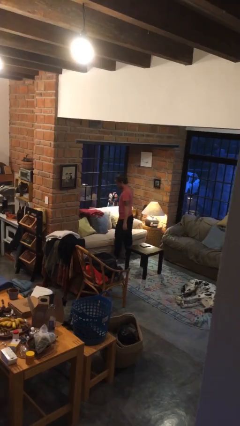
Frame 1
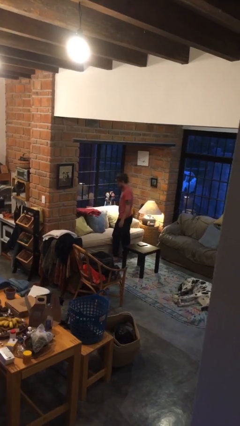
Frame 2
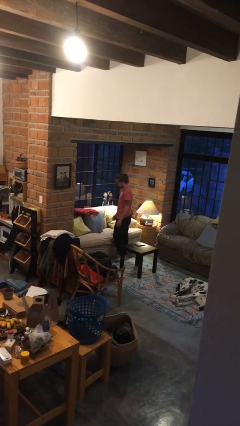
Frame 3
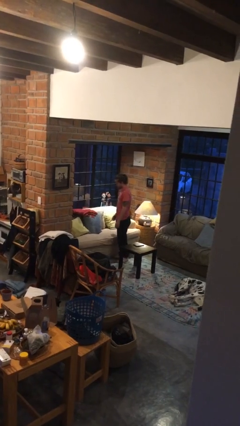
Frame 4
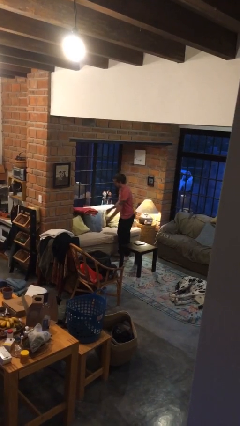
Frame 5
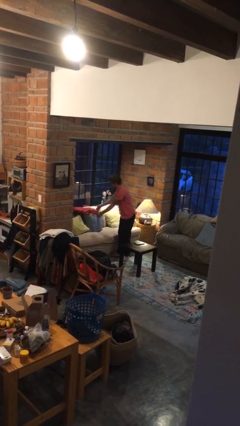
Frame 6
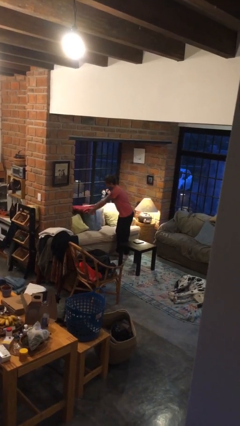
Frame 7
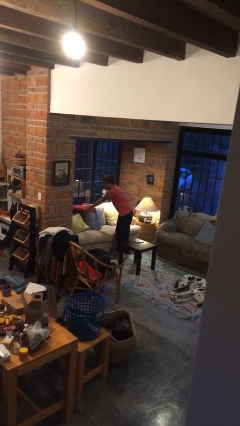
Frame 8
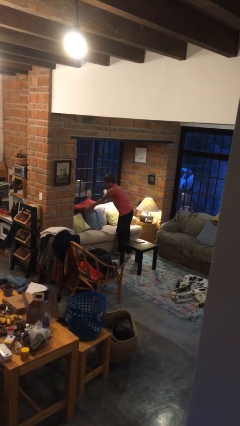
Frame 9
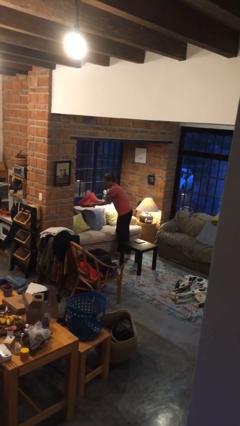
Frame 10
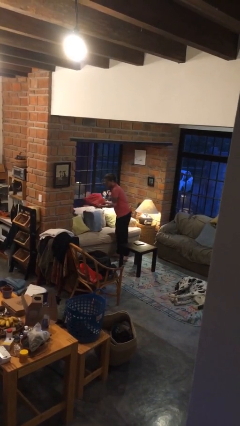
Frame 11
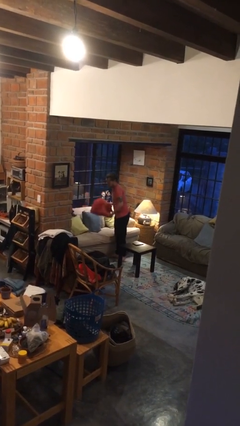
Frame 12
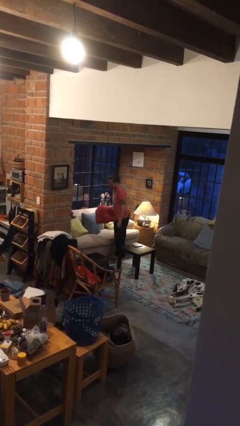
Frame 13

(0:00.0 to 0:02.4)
person picks up object from couch

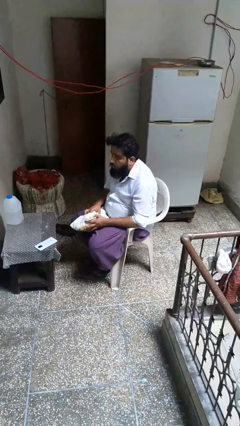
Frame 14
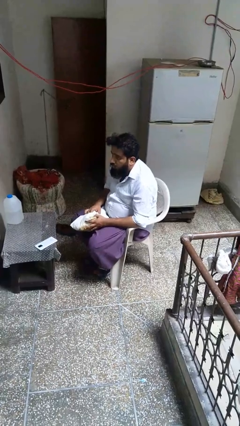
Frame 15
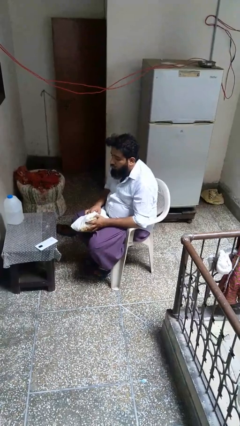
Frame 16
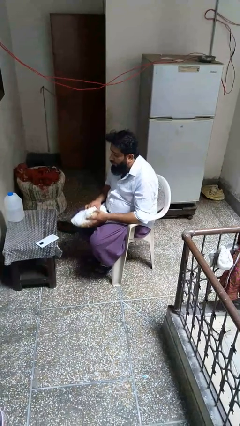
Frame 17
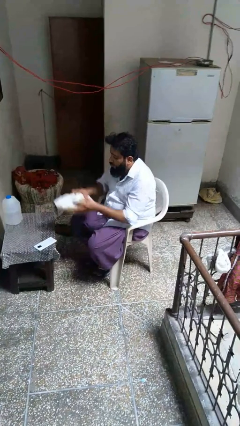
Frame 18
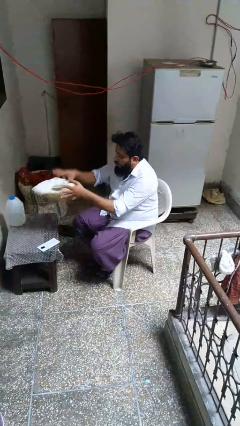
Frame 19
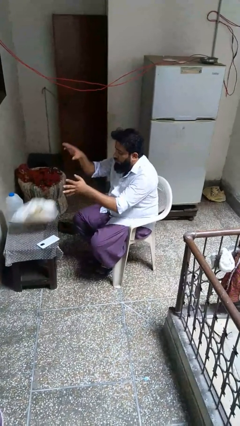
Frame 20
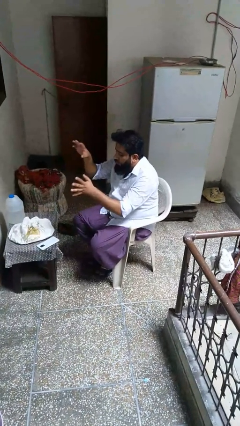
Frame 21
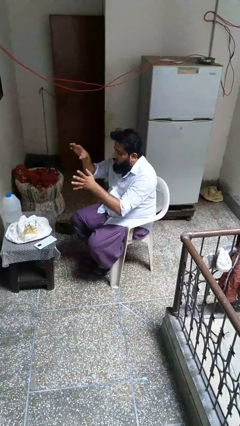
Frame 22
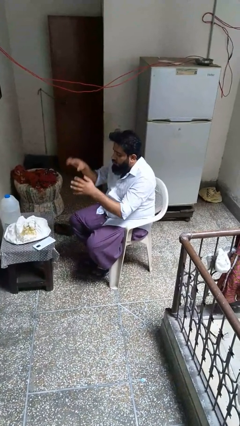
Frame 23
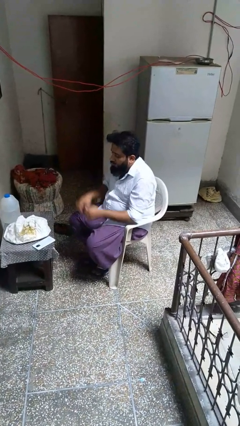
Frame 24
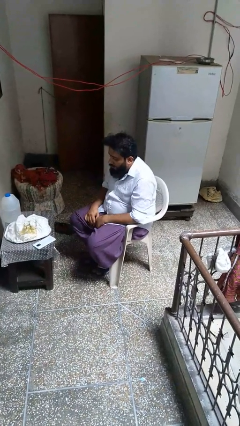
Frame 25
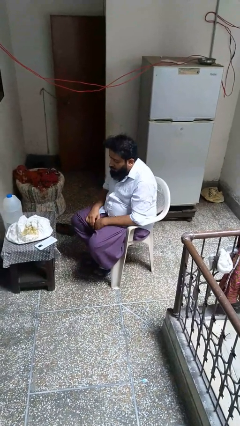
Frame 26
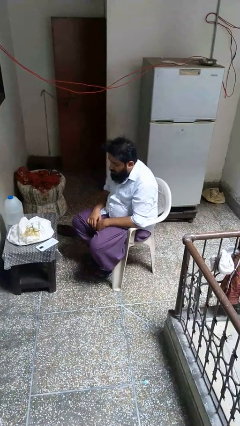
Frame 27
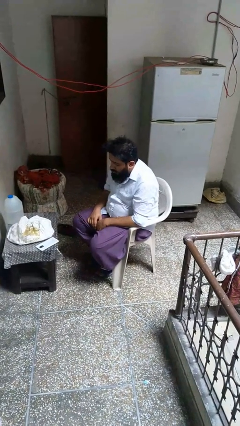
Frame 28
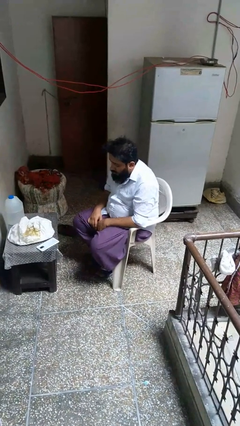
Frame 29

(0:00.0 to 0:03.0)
person throws object on table

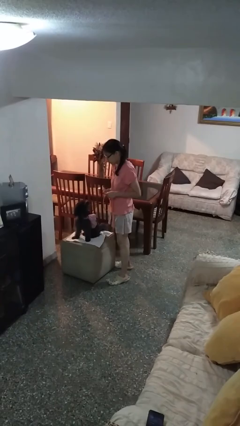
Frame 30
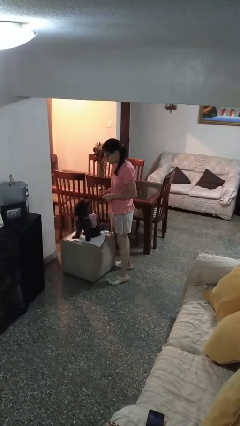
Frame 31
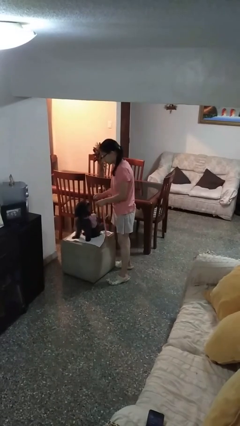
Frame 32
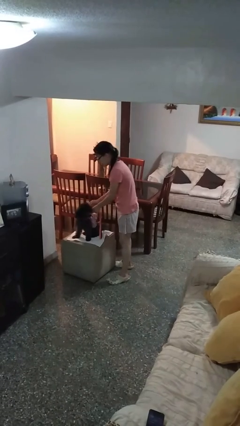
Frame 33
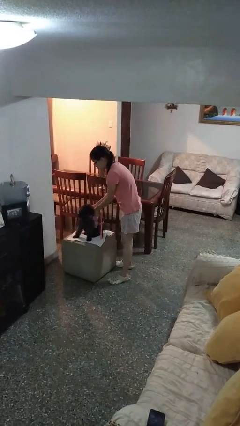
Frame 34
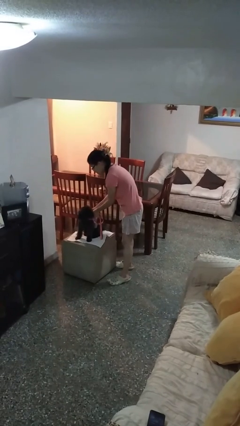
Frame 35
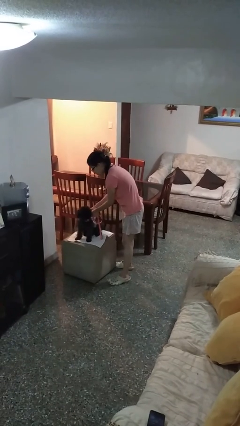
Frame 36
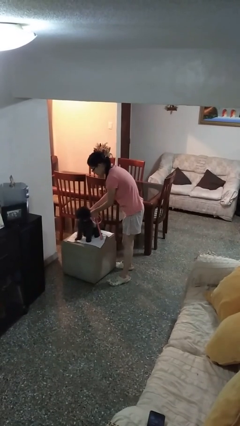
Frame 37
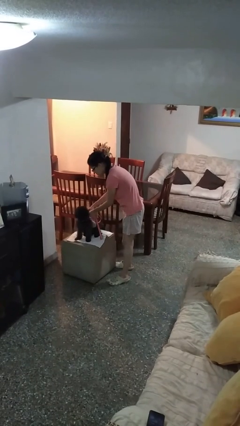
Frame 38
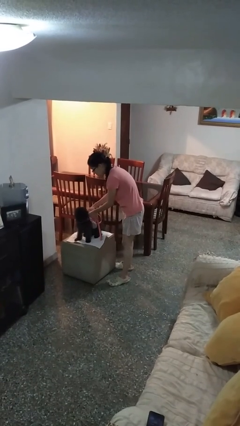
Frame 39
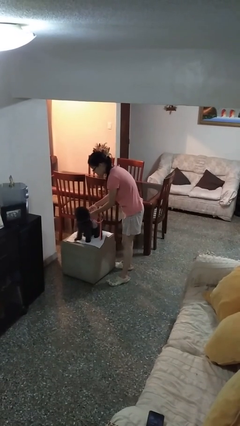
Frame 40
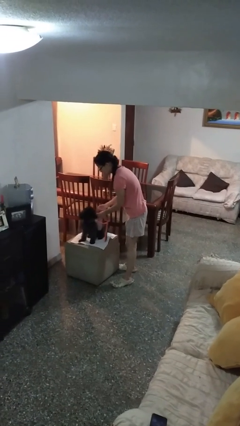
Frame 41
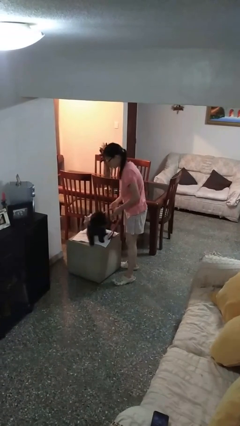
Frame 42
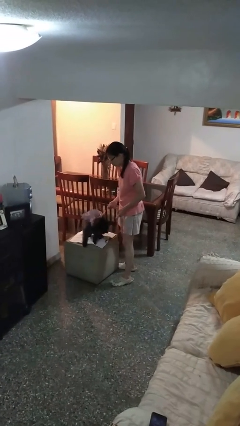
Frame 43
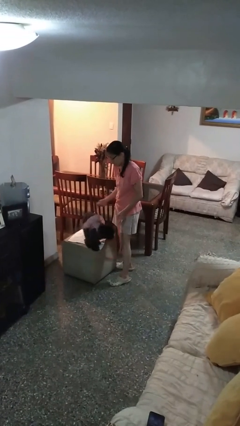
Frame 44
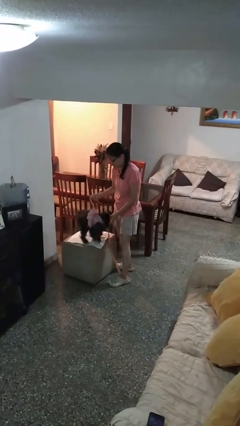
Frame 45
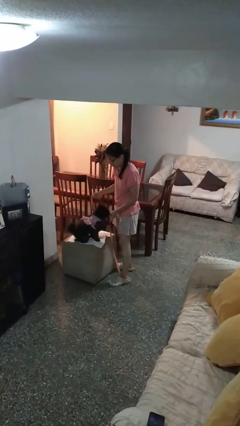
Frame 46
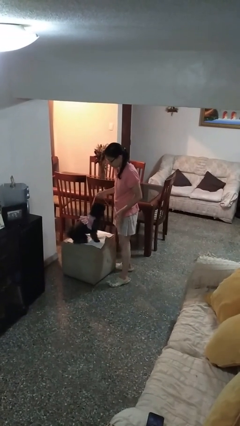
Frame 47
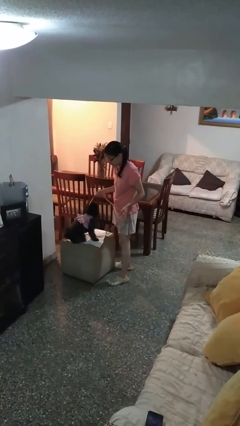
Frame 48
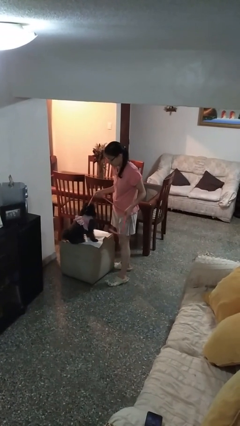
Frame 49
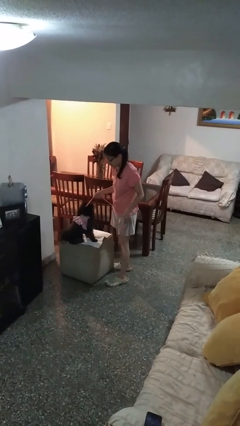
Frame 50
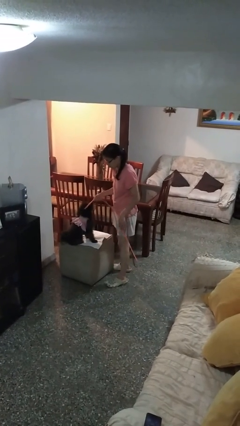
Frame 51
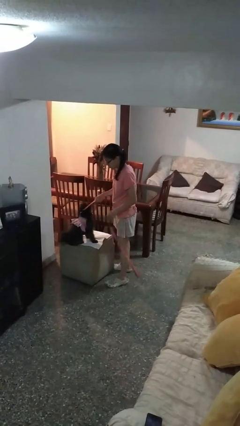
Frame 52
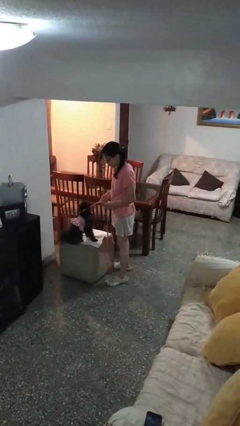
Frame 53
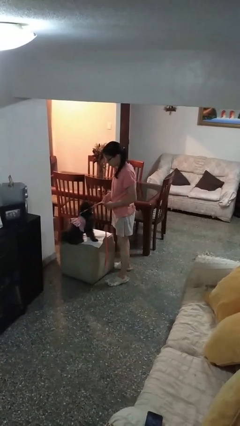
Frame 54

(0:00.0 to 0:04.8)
person attaches leash to dog

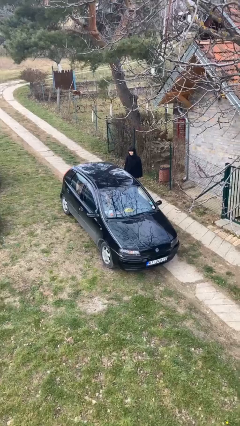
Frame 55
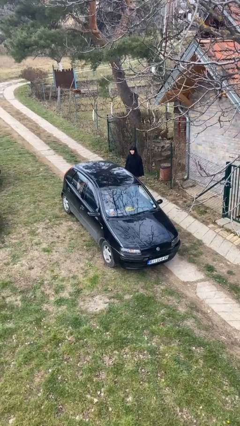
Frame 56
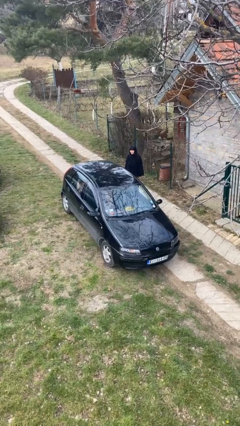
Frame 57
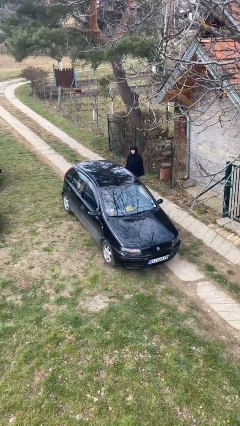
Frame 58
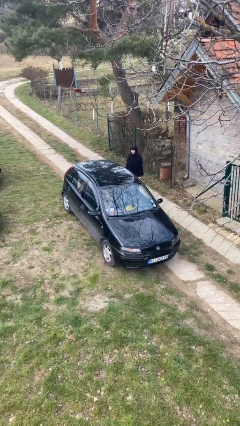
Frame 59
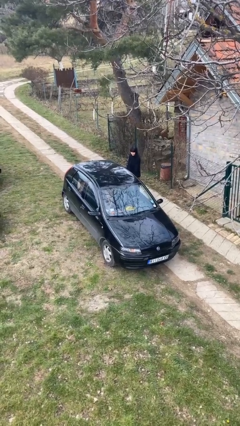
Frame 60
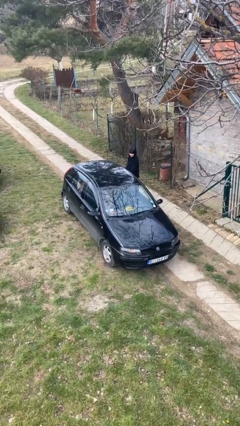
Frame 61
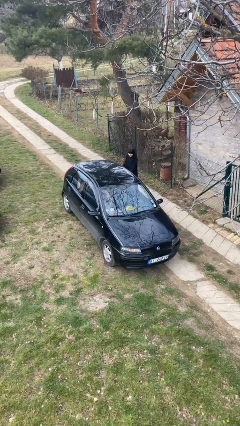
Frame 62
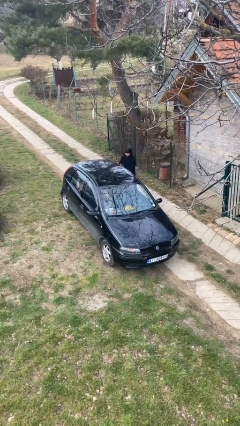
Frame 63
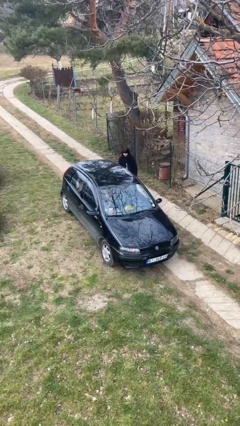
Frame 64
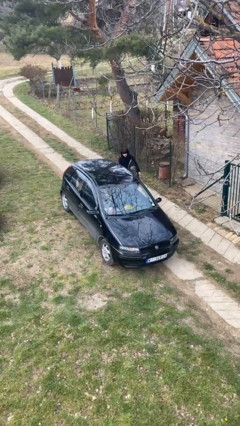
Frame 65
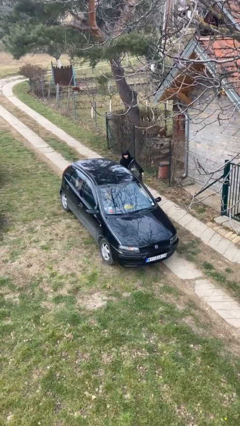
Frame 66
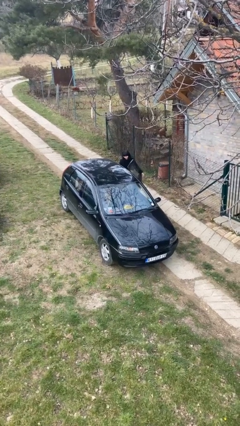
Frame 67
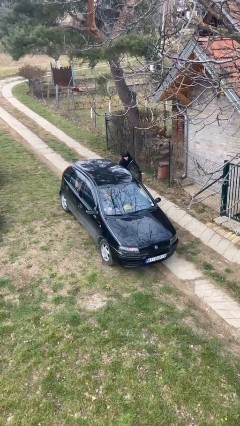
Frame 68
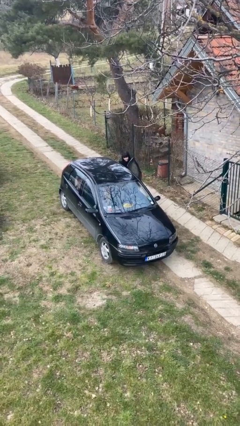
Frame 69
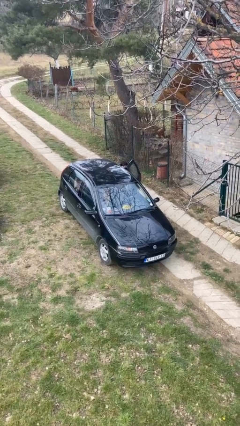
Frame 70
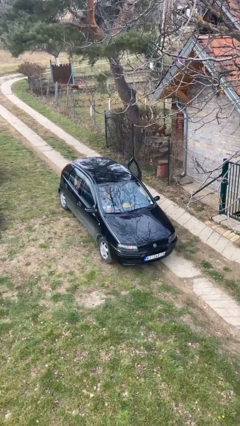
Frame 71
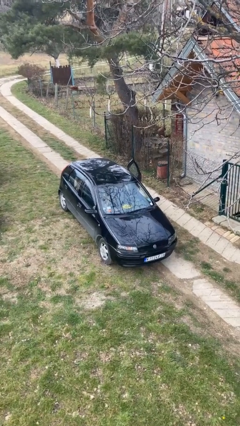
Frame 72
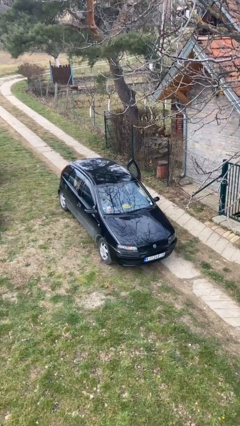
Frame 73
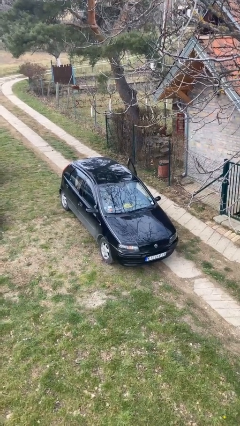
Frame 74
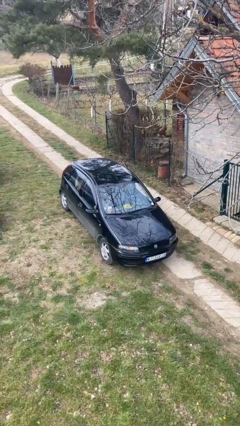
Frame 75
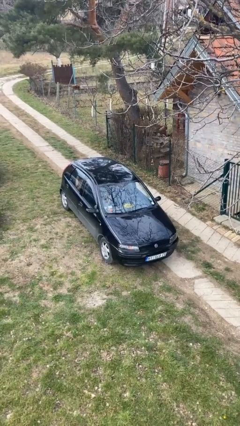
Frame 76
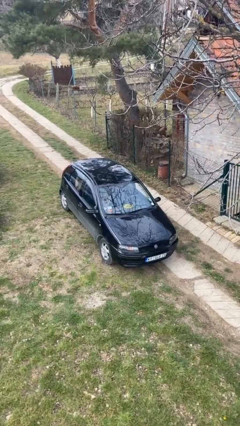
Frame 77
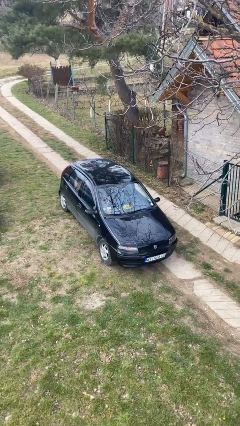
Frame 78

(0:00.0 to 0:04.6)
car picks up person

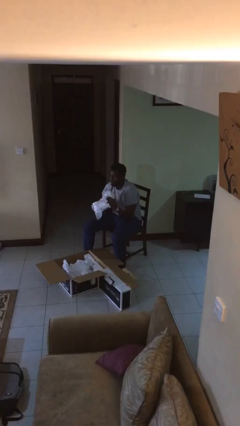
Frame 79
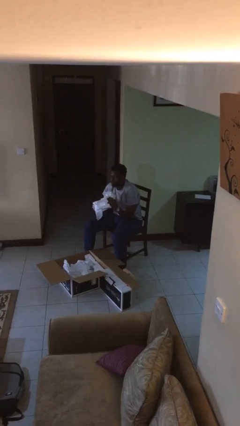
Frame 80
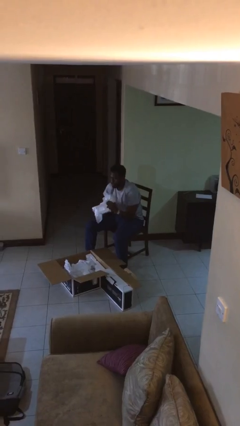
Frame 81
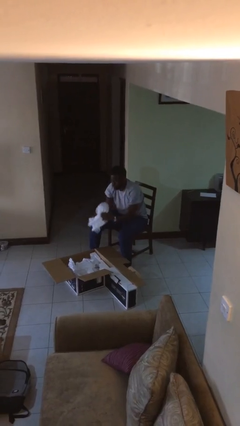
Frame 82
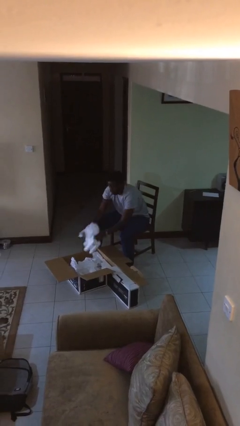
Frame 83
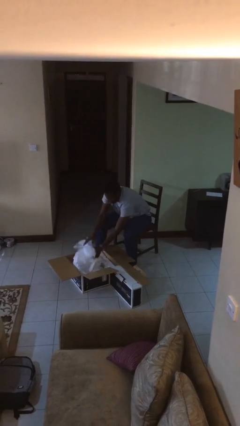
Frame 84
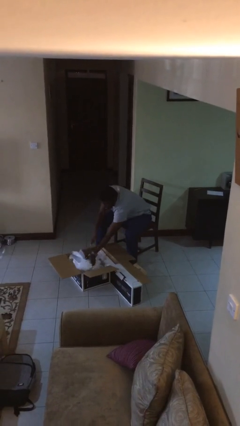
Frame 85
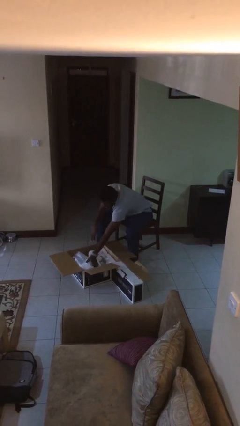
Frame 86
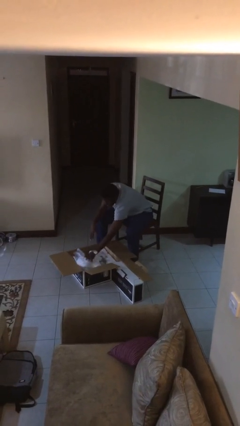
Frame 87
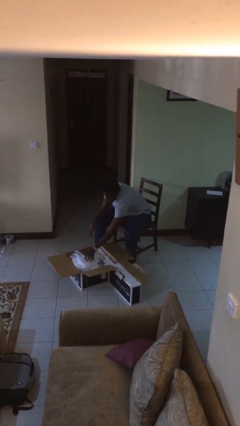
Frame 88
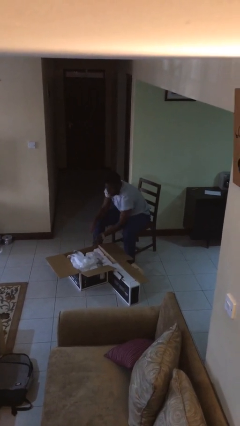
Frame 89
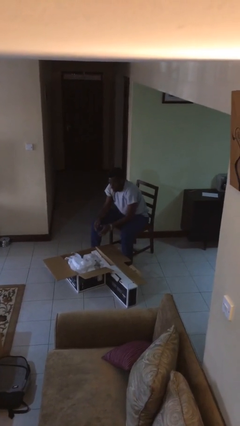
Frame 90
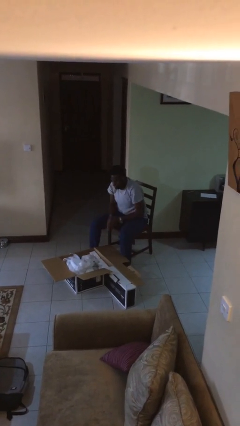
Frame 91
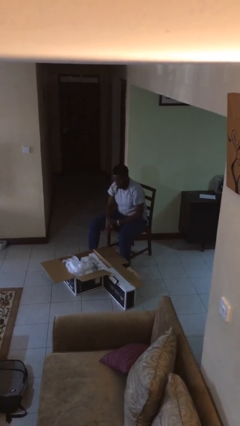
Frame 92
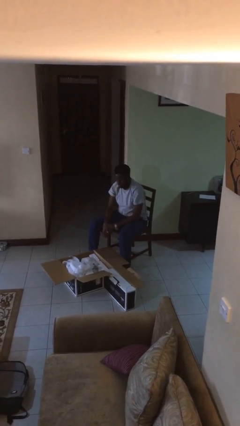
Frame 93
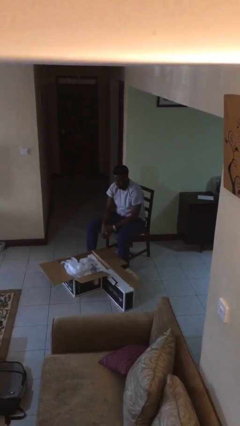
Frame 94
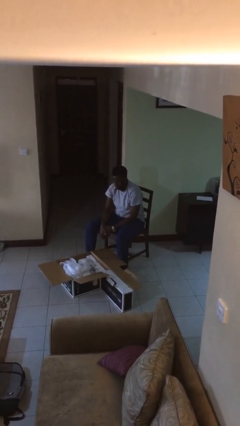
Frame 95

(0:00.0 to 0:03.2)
person puts object into box
